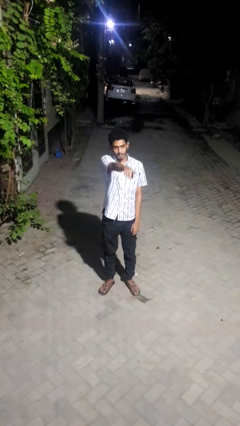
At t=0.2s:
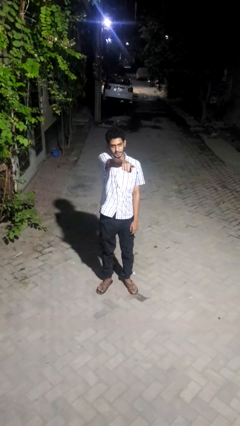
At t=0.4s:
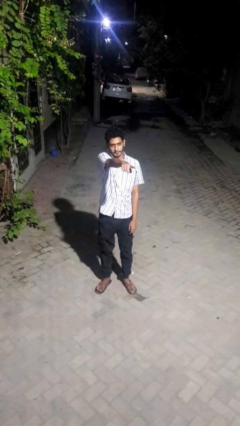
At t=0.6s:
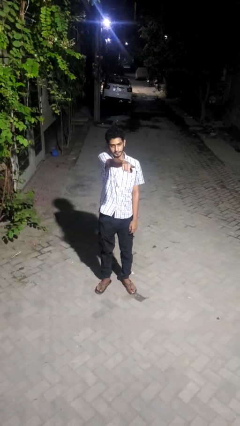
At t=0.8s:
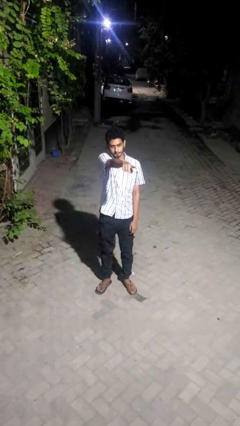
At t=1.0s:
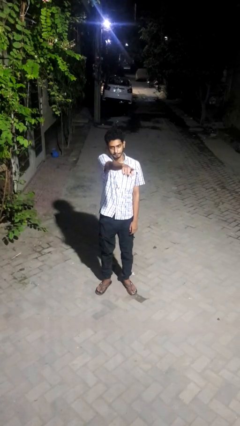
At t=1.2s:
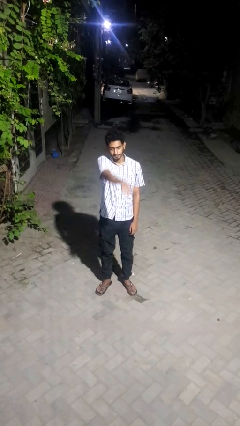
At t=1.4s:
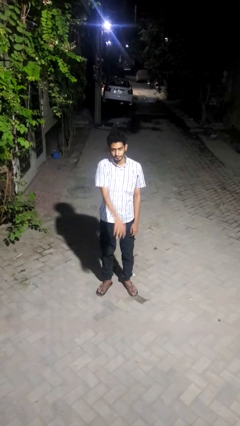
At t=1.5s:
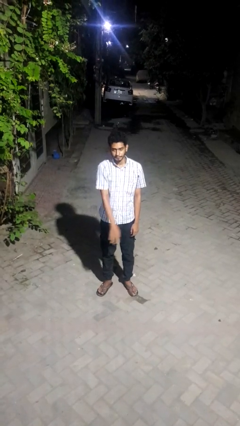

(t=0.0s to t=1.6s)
person points at person

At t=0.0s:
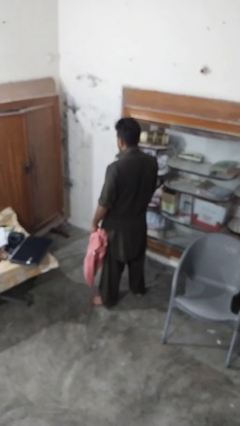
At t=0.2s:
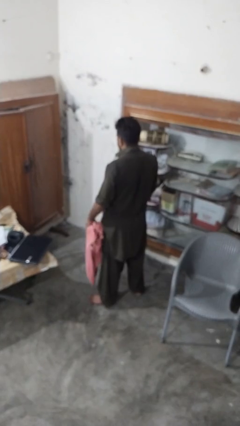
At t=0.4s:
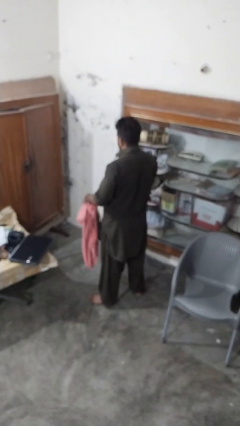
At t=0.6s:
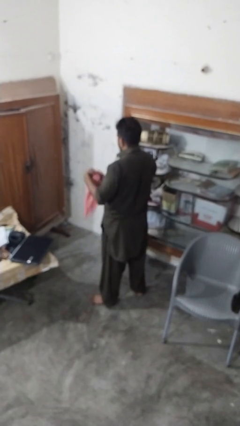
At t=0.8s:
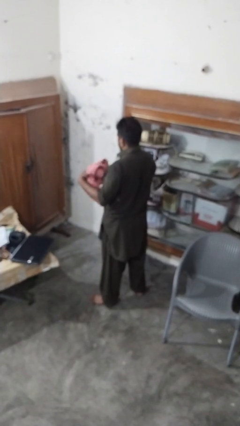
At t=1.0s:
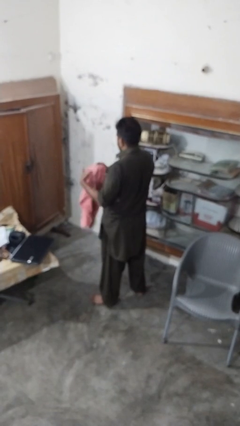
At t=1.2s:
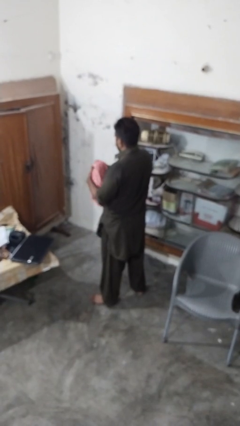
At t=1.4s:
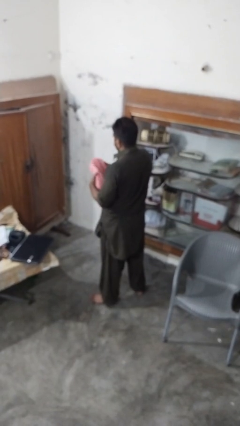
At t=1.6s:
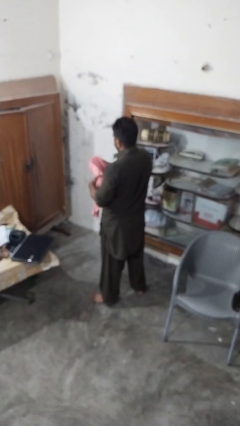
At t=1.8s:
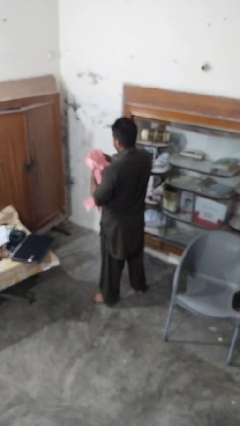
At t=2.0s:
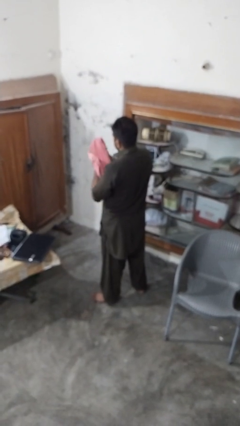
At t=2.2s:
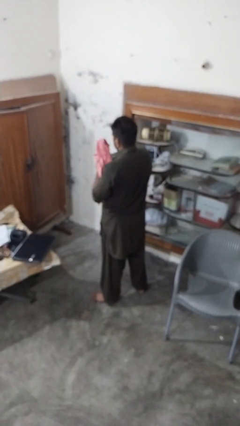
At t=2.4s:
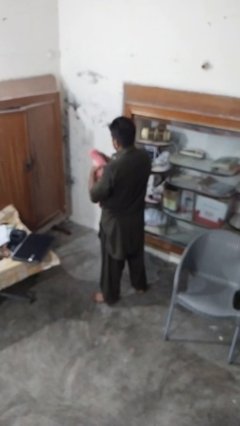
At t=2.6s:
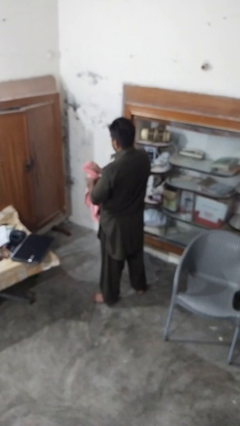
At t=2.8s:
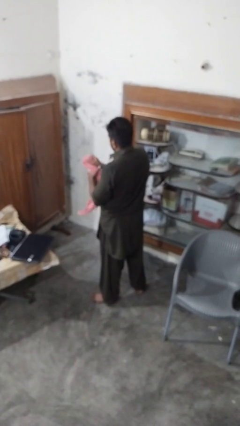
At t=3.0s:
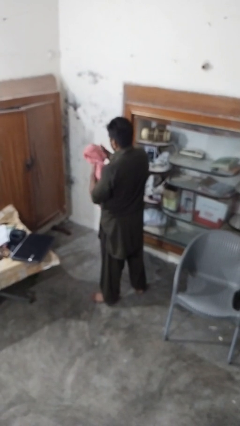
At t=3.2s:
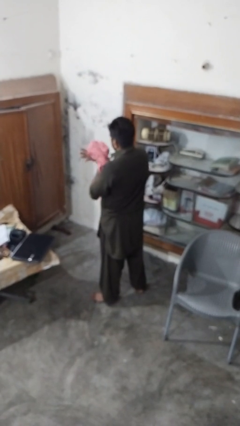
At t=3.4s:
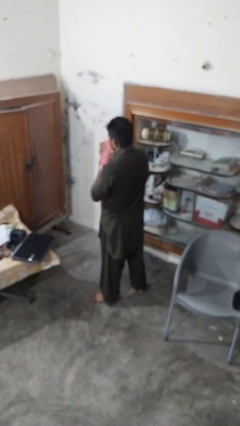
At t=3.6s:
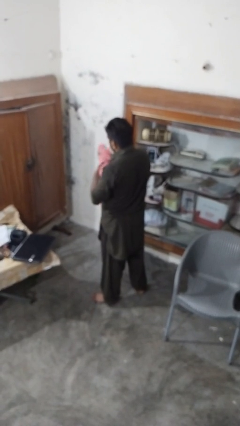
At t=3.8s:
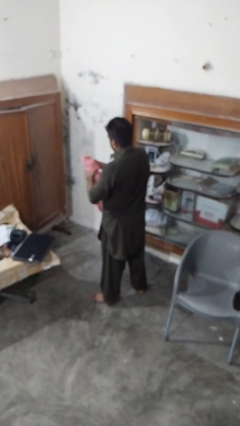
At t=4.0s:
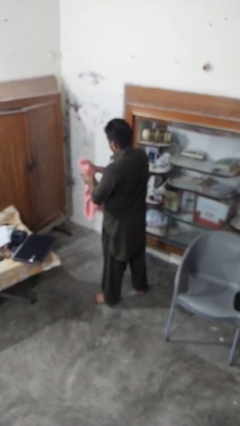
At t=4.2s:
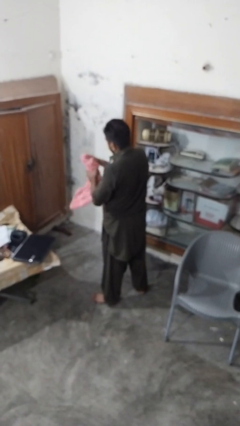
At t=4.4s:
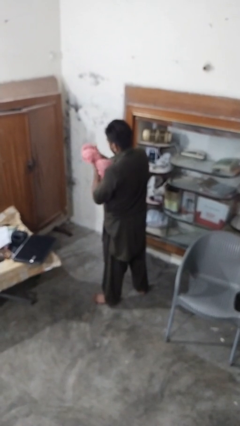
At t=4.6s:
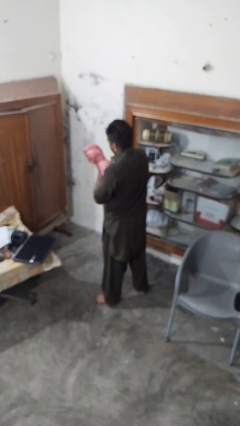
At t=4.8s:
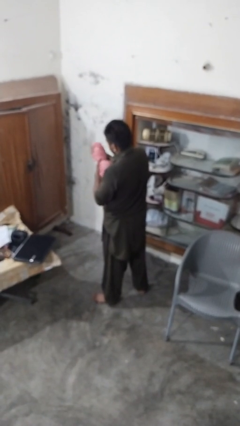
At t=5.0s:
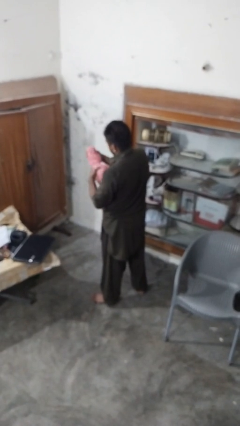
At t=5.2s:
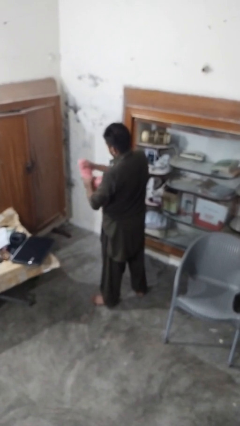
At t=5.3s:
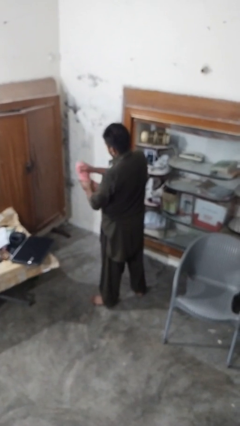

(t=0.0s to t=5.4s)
person squeezes object

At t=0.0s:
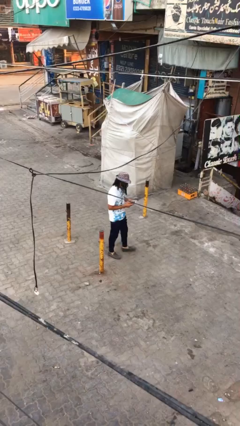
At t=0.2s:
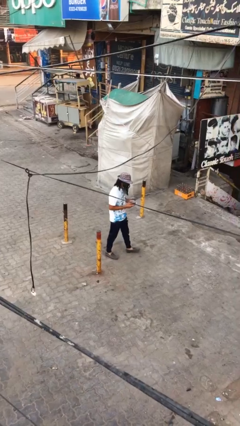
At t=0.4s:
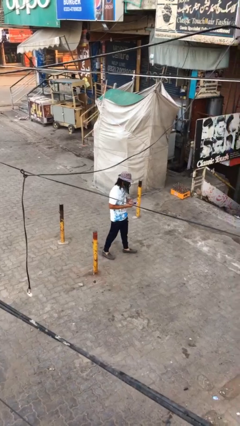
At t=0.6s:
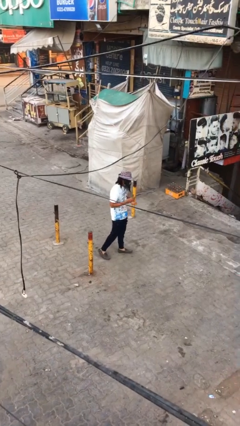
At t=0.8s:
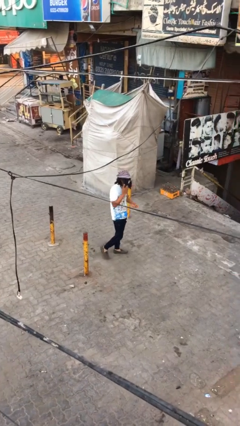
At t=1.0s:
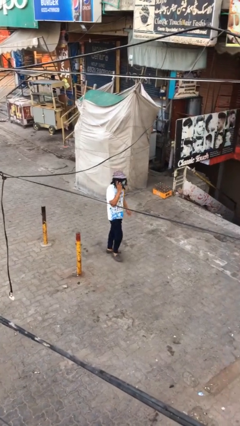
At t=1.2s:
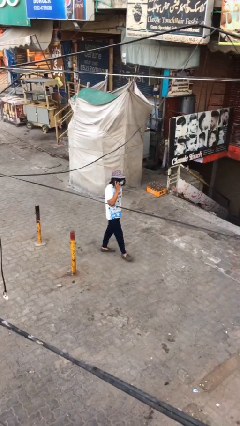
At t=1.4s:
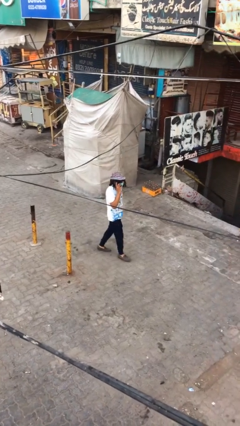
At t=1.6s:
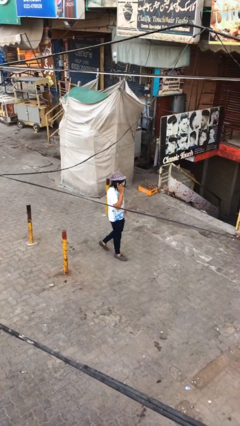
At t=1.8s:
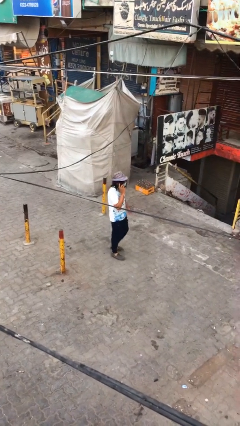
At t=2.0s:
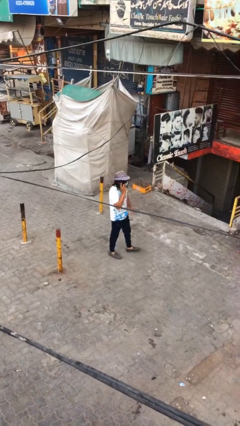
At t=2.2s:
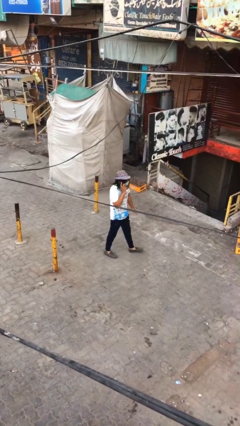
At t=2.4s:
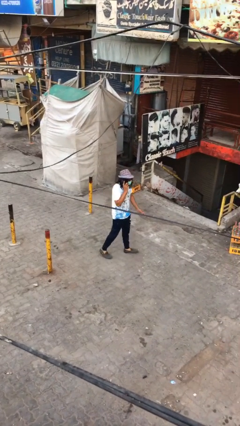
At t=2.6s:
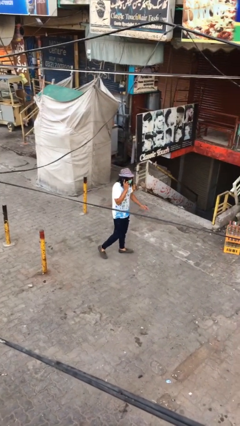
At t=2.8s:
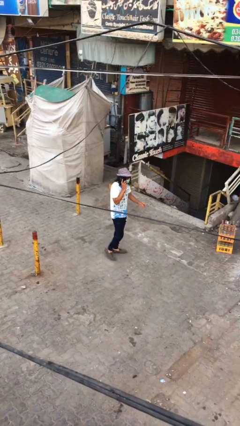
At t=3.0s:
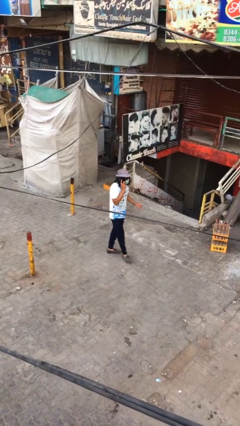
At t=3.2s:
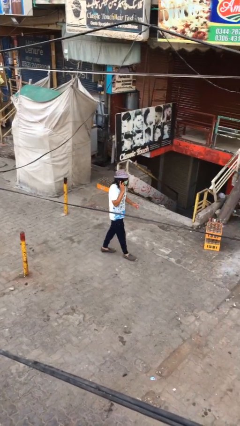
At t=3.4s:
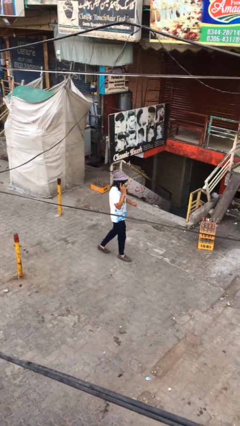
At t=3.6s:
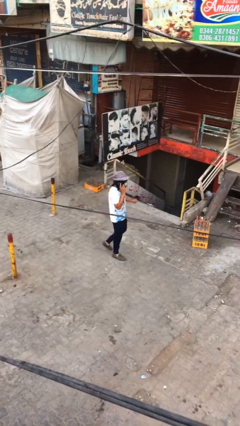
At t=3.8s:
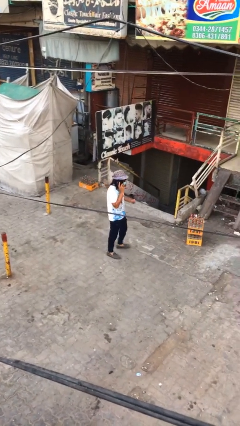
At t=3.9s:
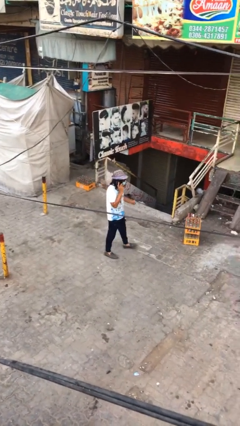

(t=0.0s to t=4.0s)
person talks on phone

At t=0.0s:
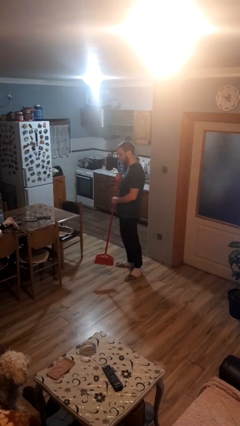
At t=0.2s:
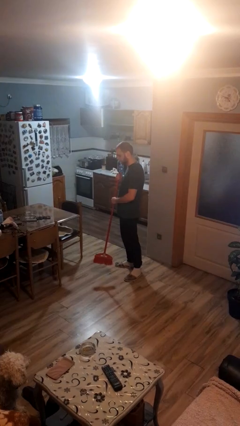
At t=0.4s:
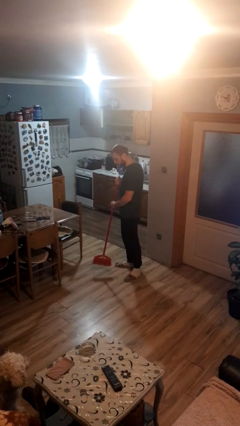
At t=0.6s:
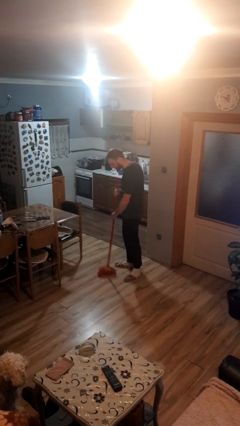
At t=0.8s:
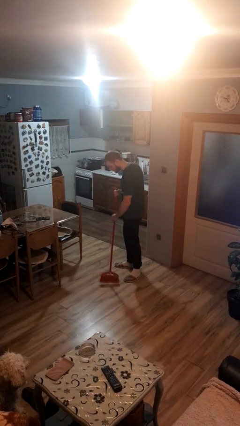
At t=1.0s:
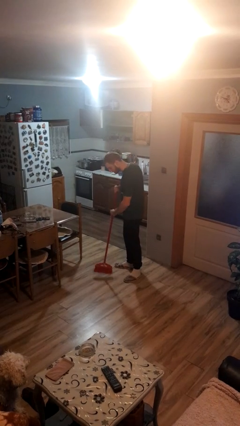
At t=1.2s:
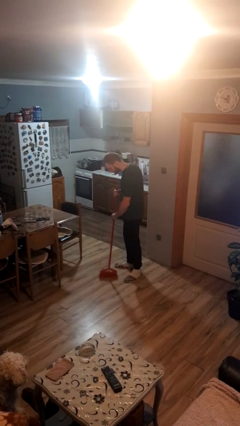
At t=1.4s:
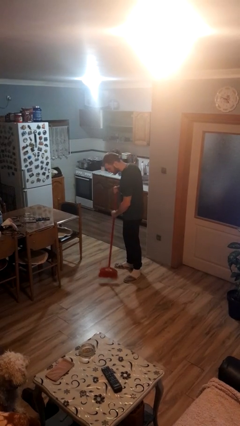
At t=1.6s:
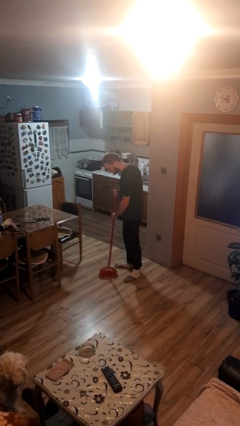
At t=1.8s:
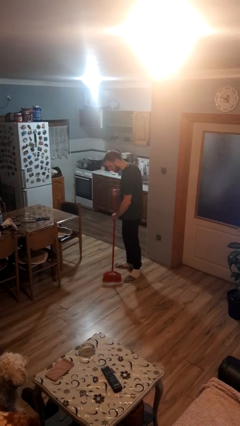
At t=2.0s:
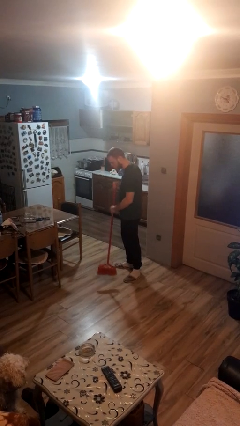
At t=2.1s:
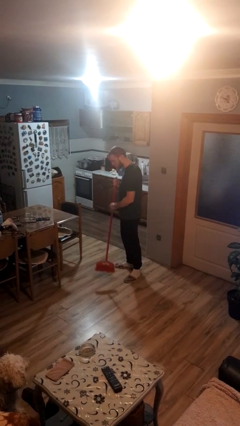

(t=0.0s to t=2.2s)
person sweeps floor

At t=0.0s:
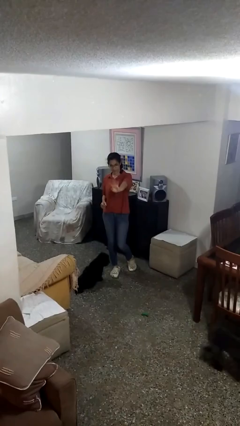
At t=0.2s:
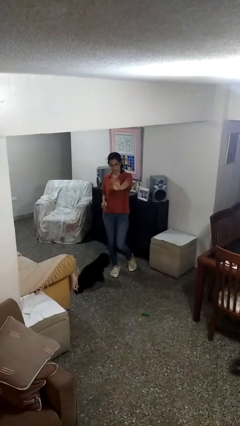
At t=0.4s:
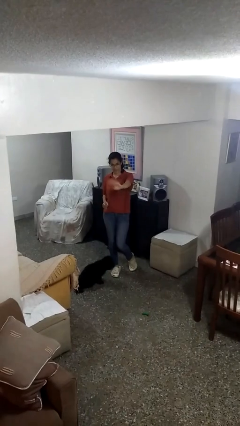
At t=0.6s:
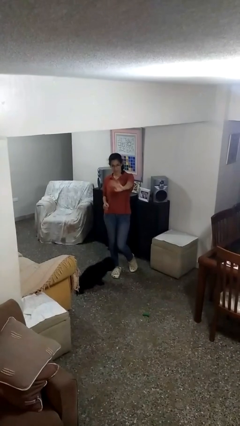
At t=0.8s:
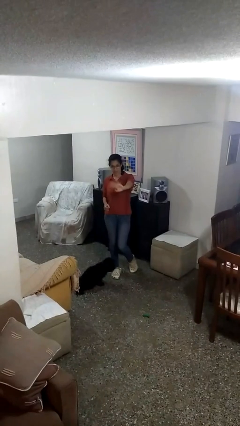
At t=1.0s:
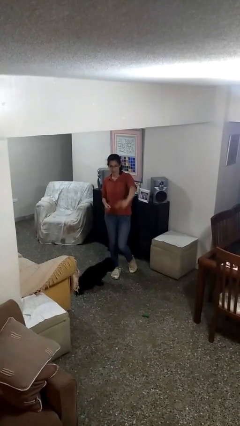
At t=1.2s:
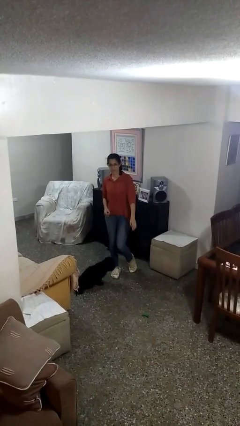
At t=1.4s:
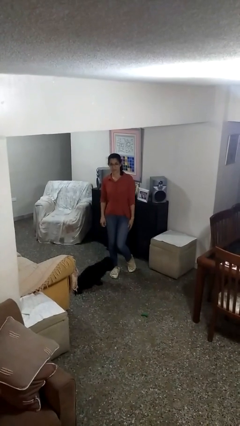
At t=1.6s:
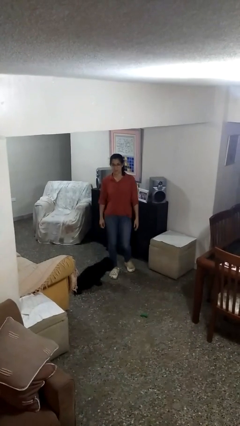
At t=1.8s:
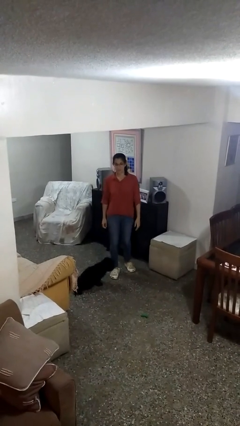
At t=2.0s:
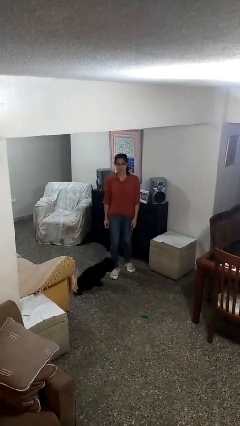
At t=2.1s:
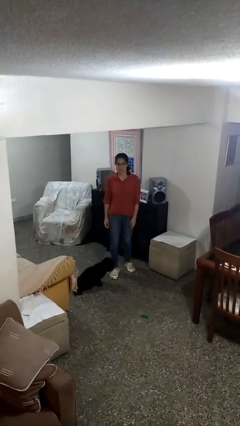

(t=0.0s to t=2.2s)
person waves at person

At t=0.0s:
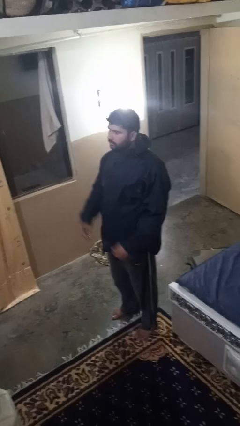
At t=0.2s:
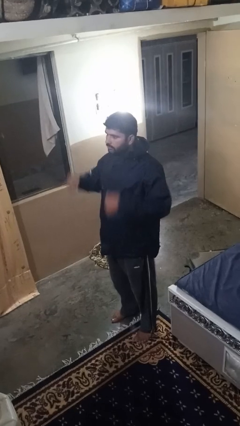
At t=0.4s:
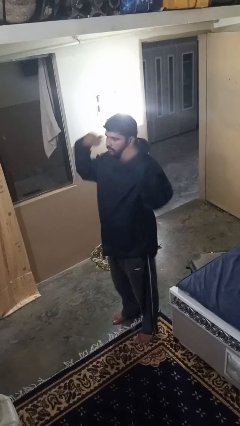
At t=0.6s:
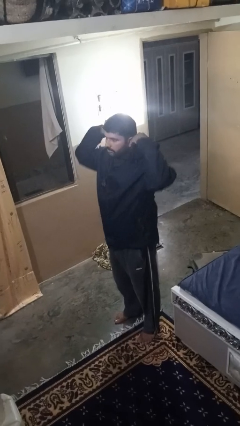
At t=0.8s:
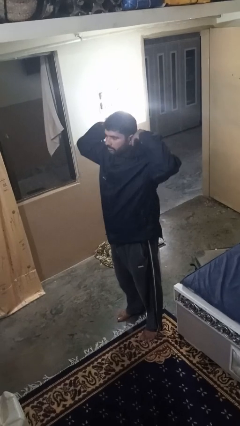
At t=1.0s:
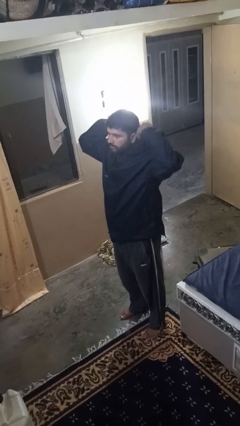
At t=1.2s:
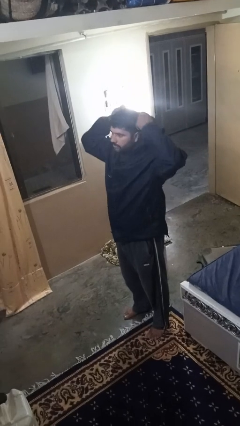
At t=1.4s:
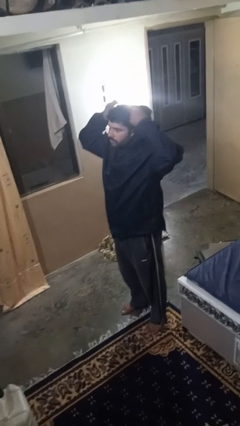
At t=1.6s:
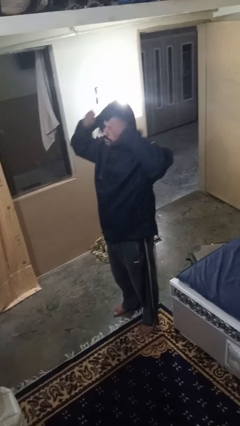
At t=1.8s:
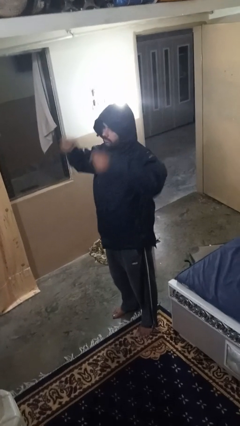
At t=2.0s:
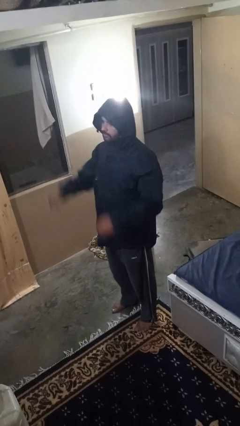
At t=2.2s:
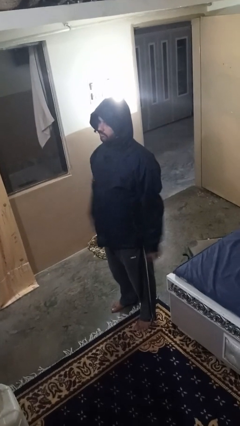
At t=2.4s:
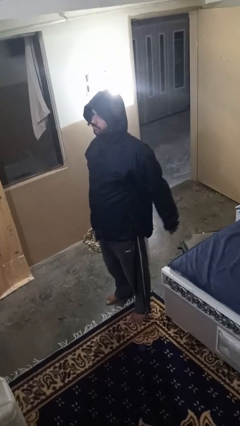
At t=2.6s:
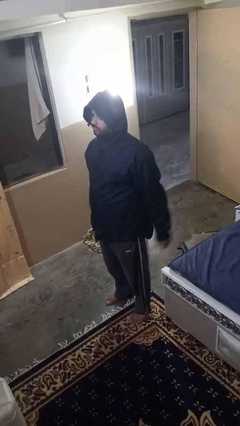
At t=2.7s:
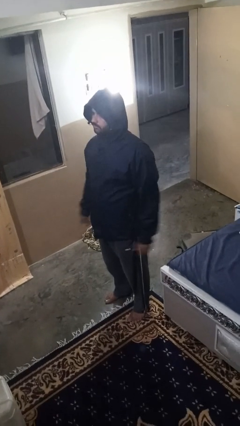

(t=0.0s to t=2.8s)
person puts on hoodie
